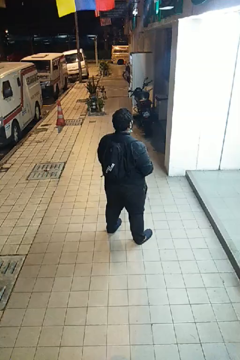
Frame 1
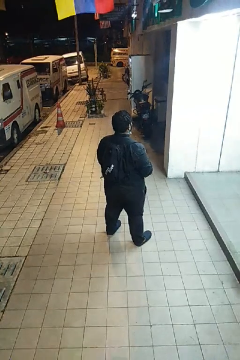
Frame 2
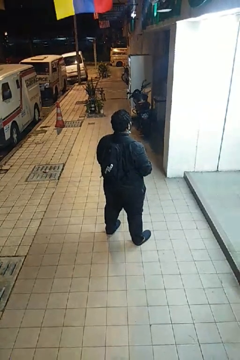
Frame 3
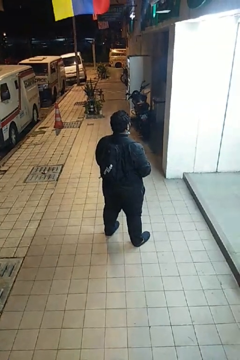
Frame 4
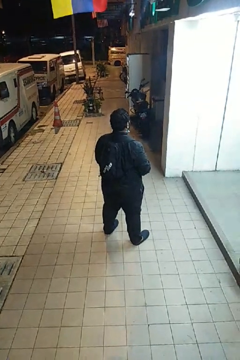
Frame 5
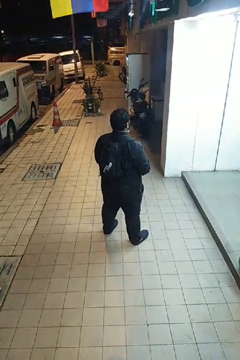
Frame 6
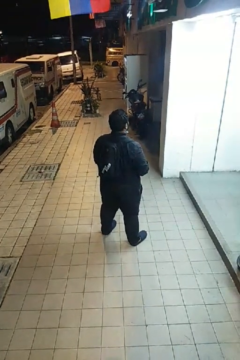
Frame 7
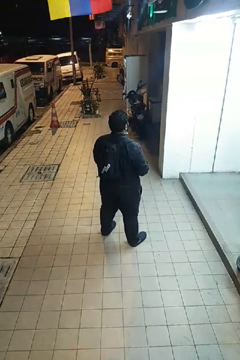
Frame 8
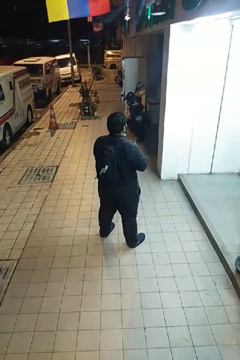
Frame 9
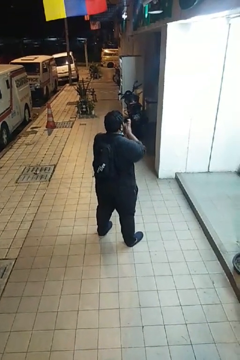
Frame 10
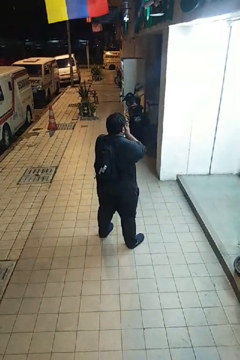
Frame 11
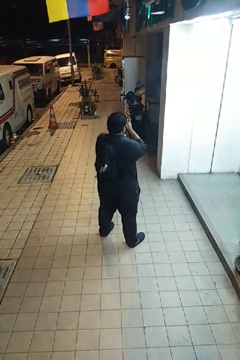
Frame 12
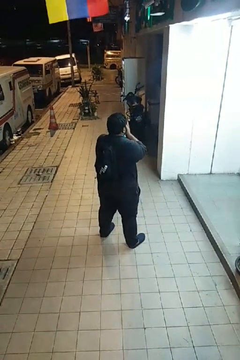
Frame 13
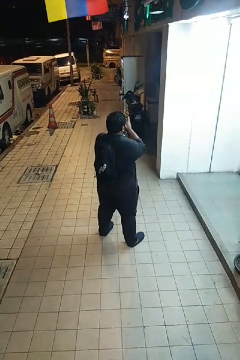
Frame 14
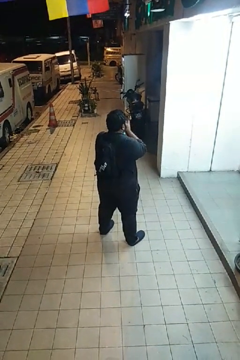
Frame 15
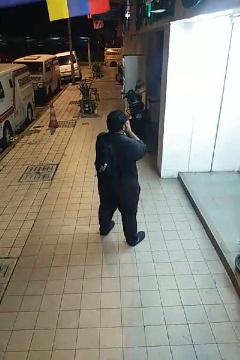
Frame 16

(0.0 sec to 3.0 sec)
person blows into hands

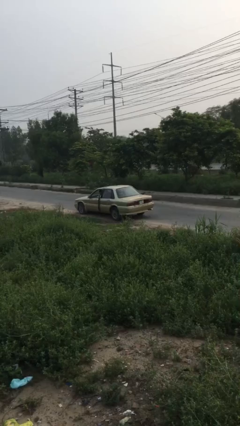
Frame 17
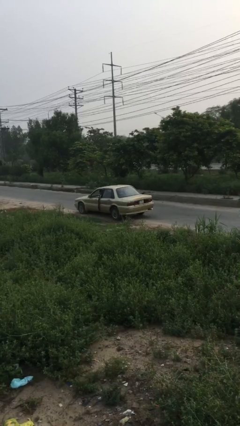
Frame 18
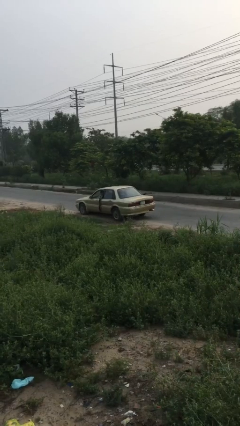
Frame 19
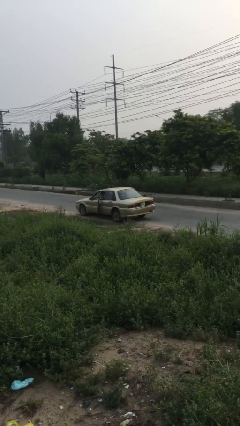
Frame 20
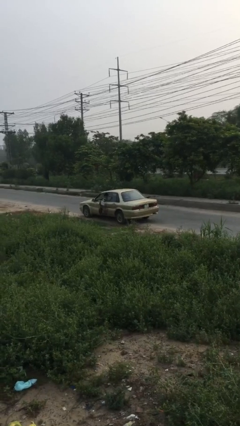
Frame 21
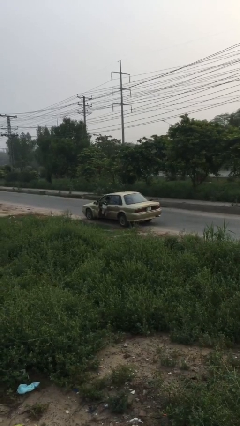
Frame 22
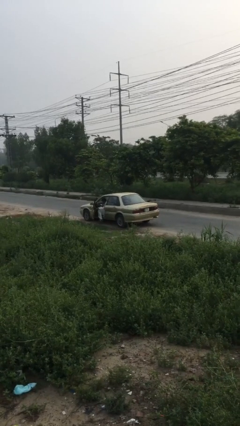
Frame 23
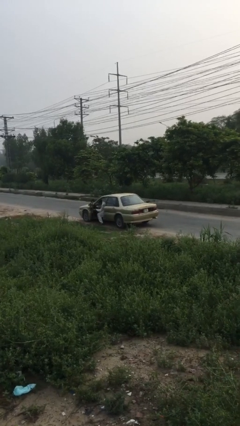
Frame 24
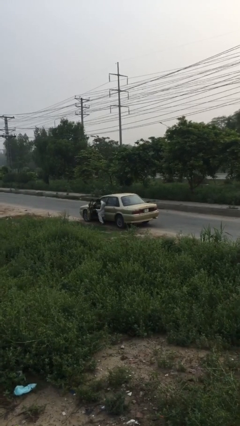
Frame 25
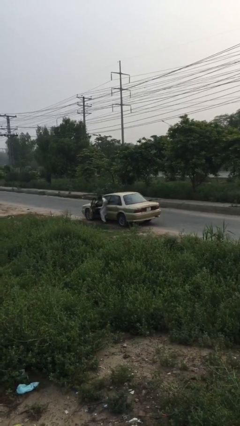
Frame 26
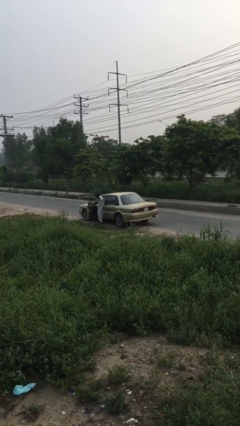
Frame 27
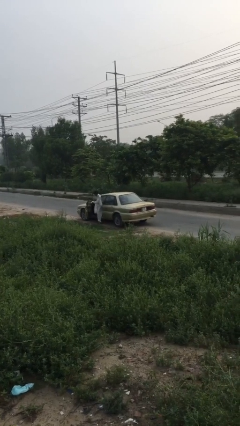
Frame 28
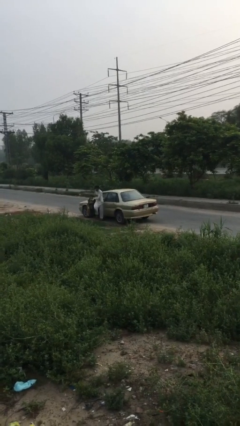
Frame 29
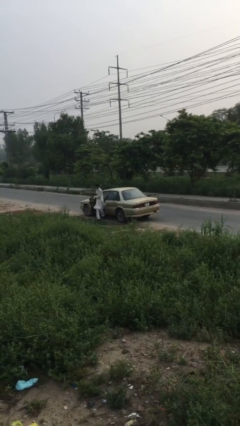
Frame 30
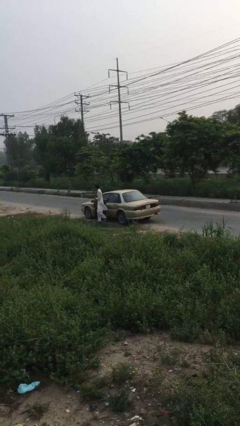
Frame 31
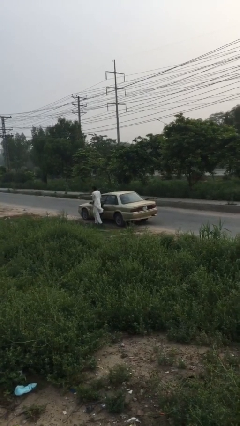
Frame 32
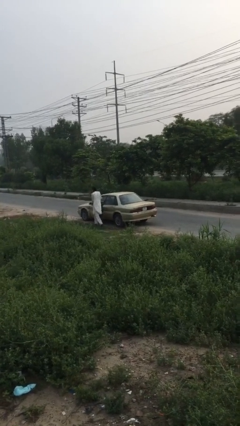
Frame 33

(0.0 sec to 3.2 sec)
car drops off person

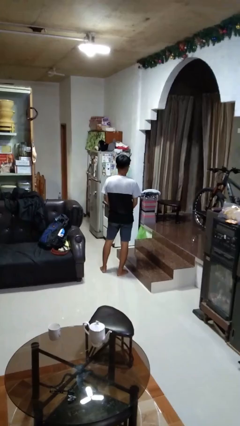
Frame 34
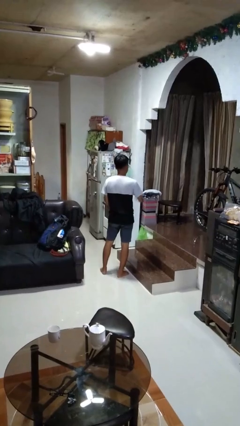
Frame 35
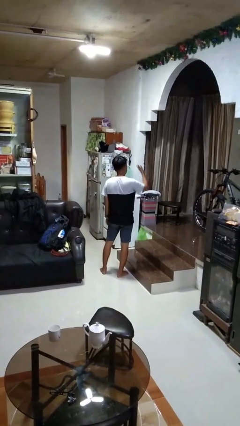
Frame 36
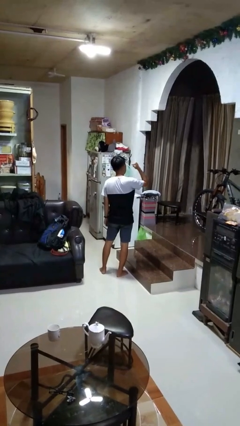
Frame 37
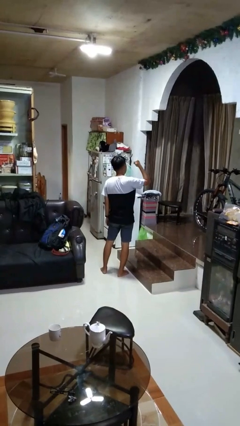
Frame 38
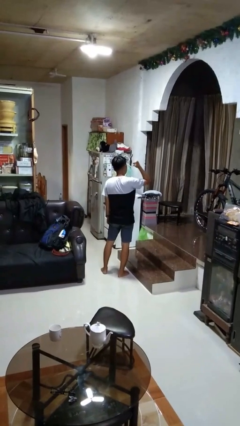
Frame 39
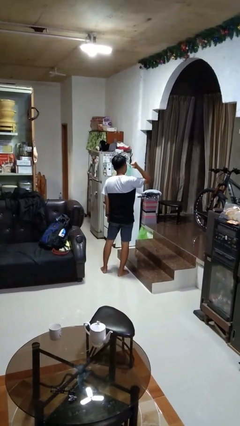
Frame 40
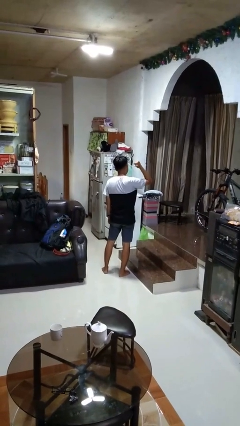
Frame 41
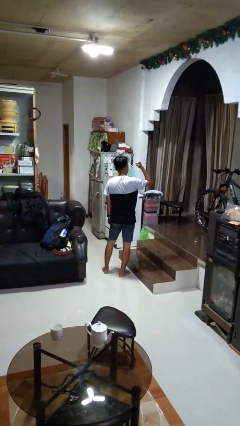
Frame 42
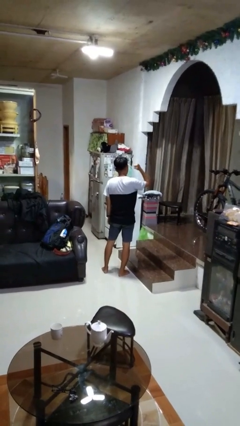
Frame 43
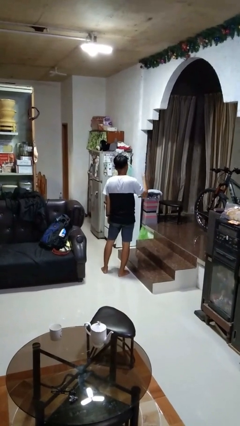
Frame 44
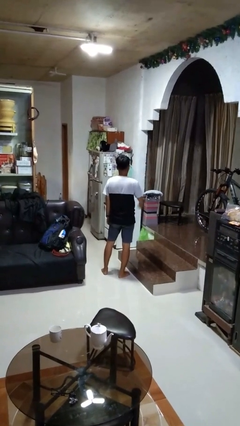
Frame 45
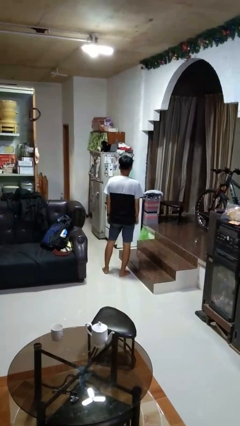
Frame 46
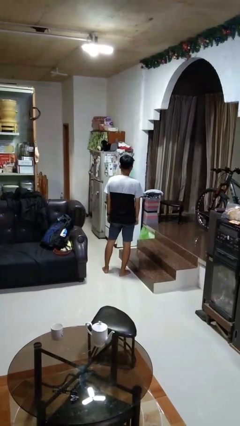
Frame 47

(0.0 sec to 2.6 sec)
person gestures behind me

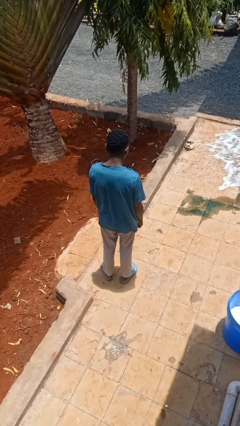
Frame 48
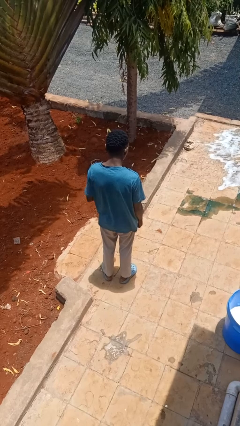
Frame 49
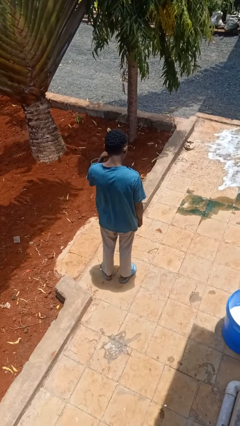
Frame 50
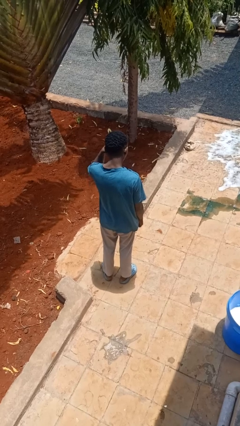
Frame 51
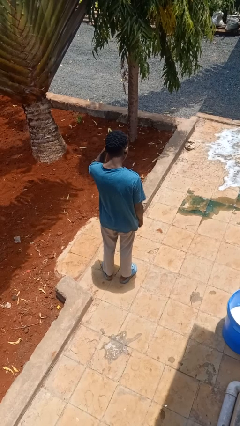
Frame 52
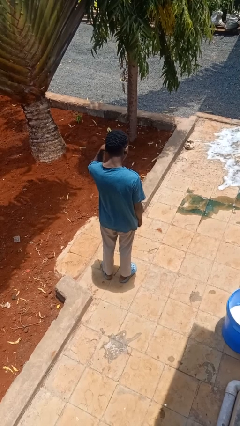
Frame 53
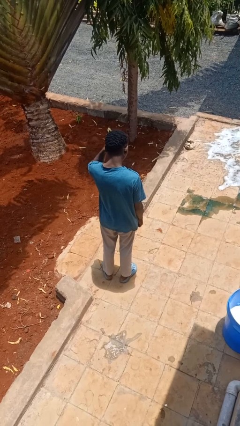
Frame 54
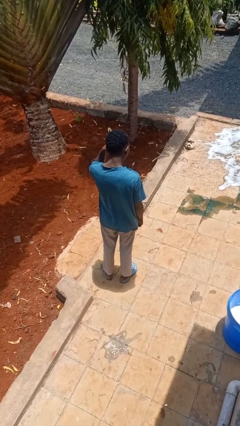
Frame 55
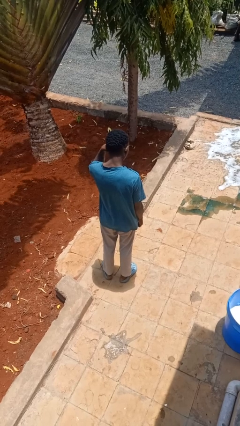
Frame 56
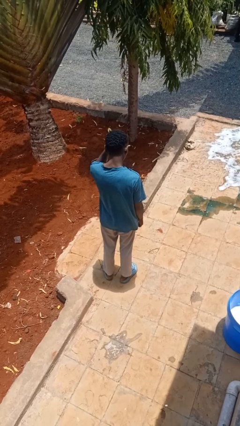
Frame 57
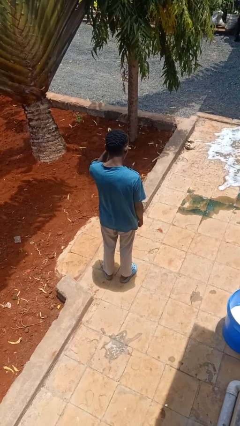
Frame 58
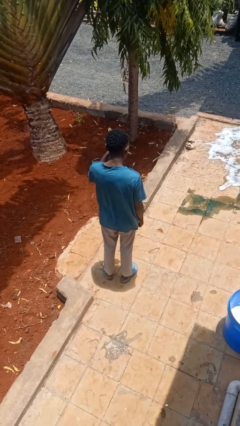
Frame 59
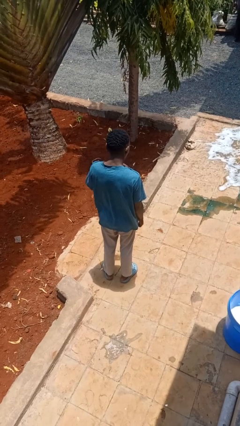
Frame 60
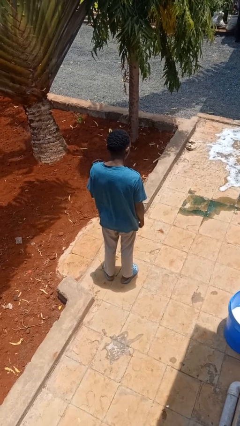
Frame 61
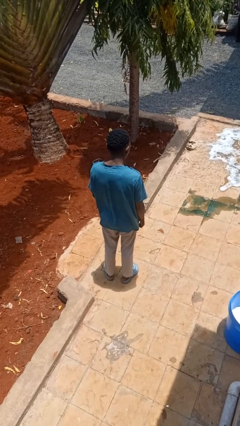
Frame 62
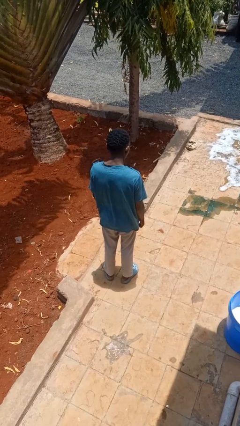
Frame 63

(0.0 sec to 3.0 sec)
person rubs eyes

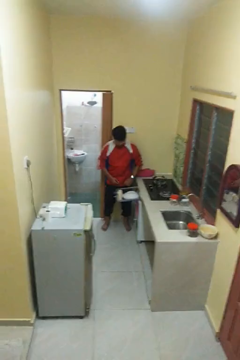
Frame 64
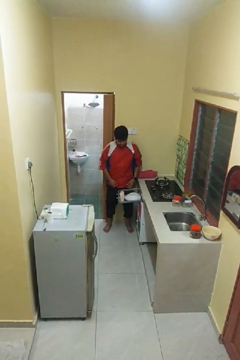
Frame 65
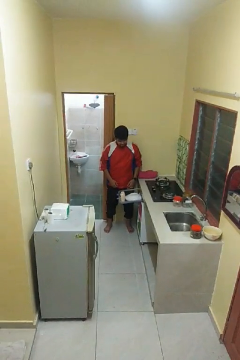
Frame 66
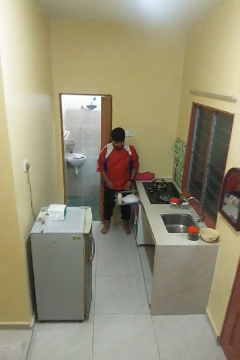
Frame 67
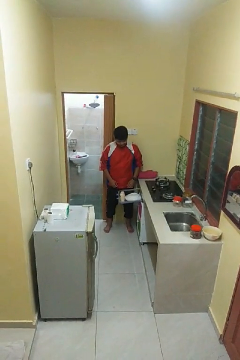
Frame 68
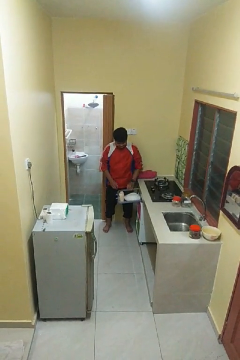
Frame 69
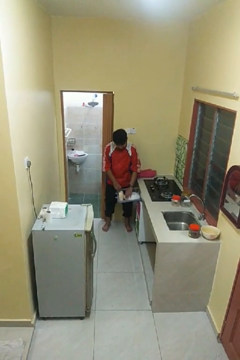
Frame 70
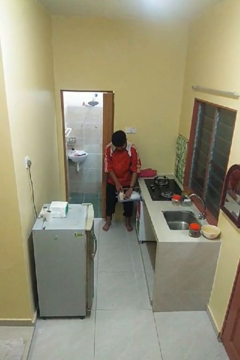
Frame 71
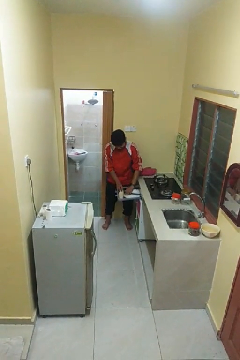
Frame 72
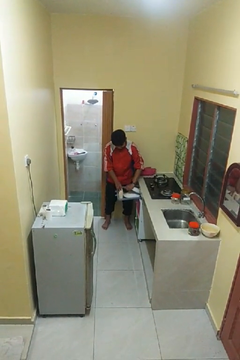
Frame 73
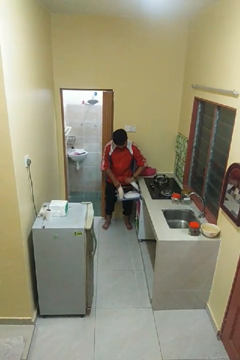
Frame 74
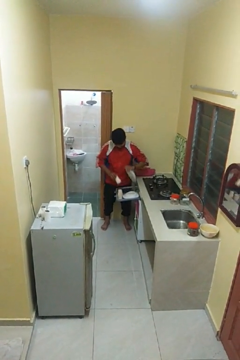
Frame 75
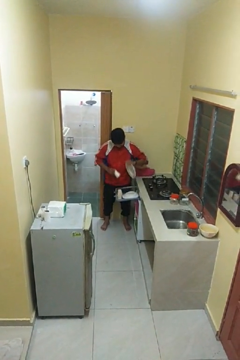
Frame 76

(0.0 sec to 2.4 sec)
person takes object from kitchen drawer

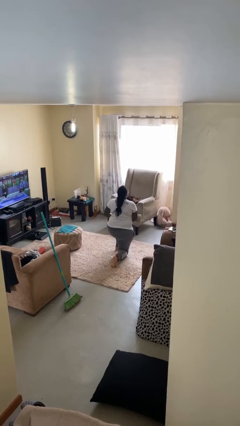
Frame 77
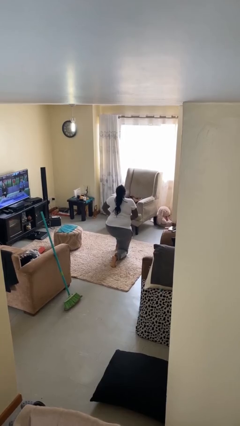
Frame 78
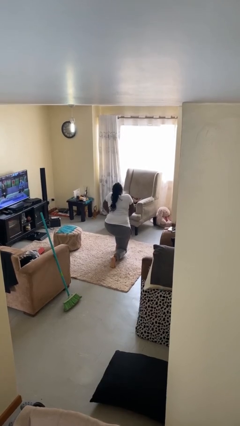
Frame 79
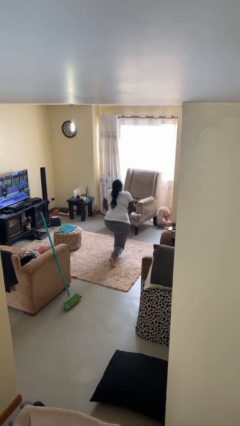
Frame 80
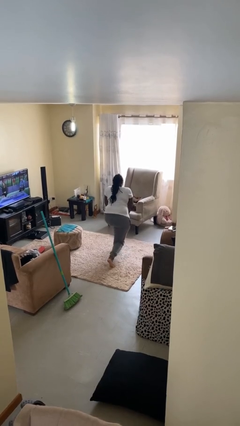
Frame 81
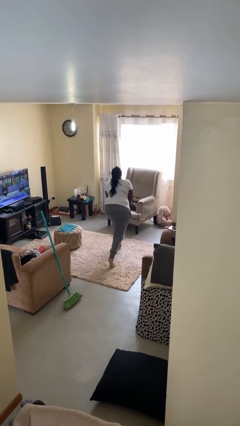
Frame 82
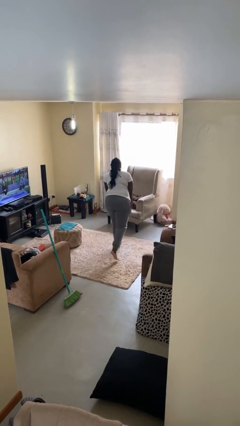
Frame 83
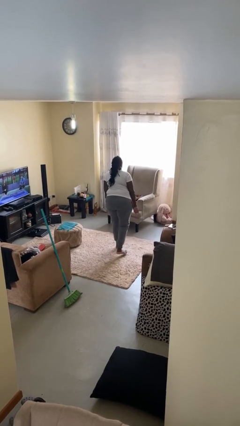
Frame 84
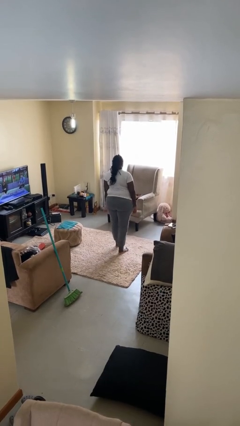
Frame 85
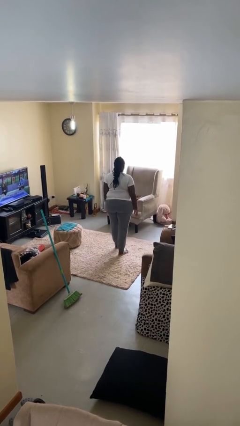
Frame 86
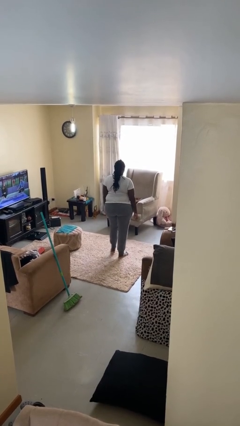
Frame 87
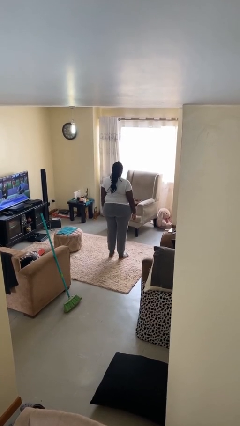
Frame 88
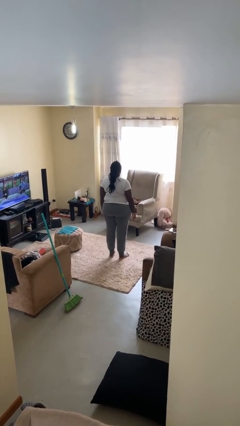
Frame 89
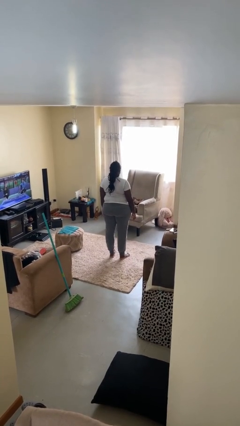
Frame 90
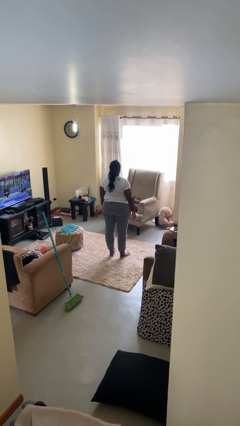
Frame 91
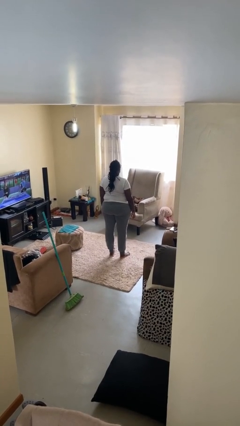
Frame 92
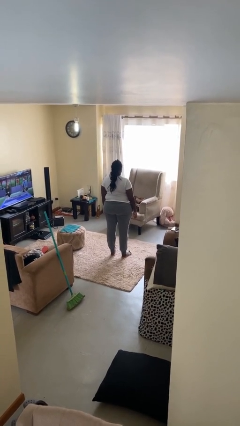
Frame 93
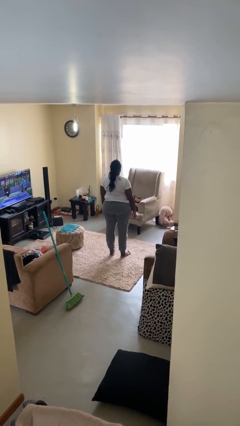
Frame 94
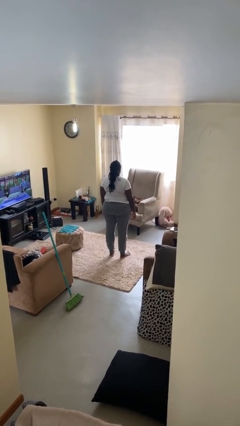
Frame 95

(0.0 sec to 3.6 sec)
person stands up from floor

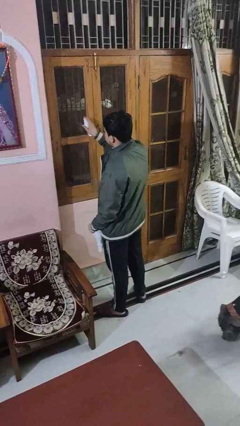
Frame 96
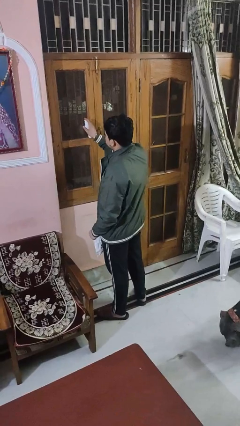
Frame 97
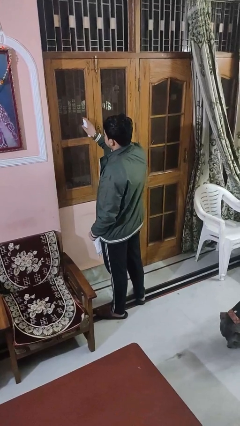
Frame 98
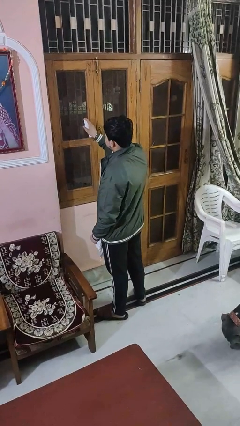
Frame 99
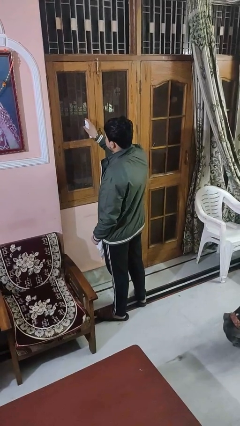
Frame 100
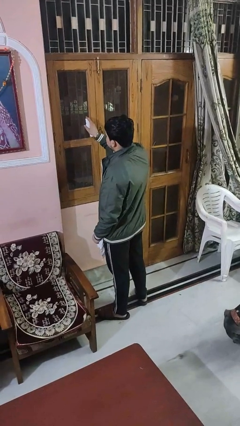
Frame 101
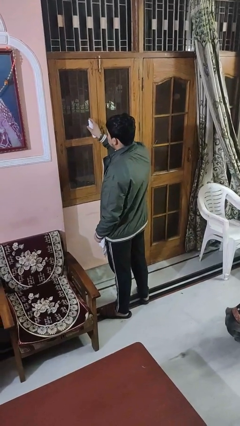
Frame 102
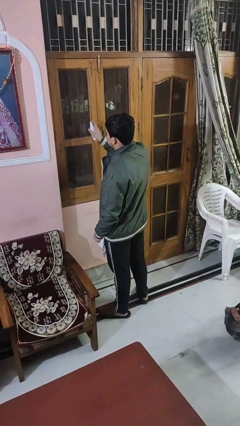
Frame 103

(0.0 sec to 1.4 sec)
person sprays from bottle
